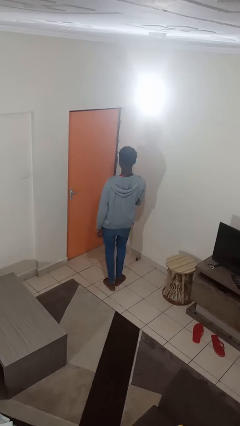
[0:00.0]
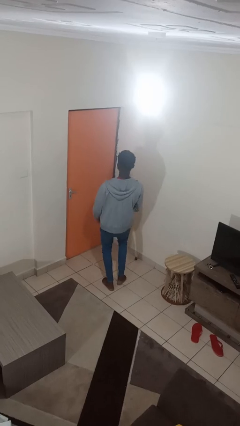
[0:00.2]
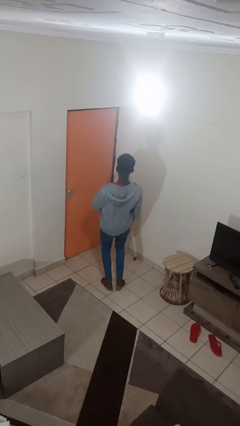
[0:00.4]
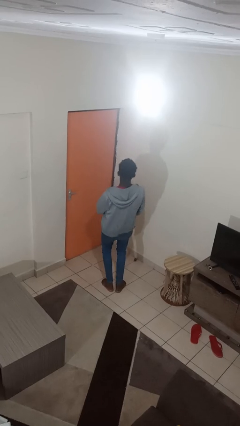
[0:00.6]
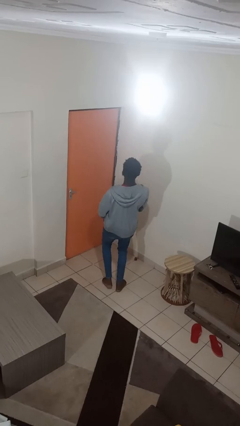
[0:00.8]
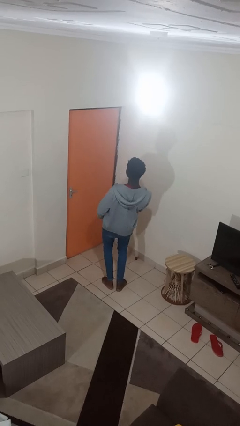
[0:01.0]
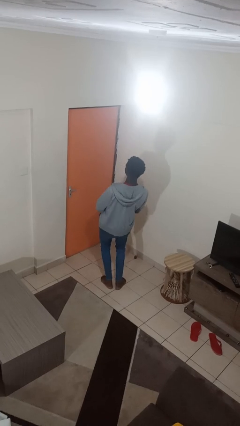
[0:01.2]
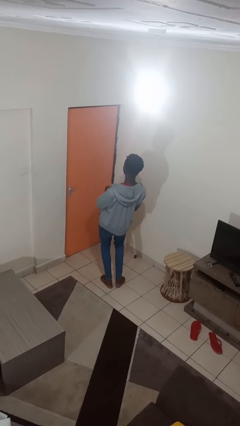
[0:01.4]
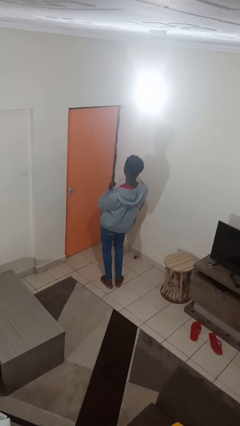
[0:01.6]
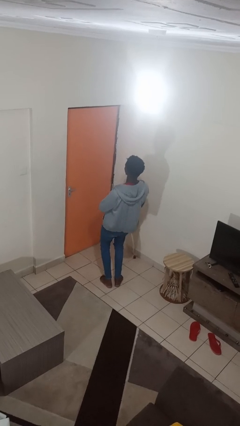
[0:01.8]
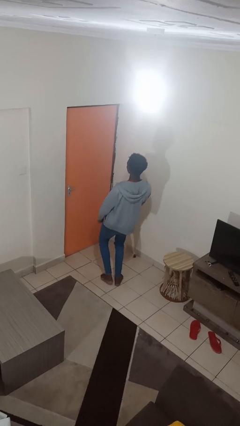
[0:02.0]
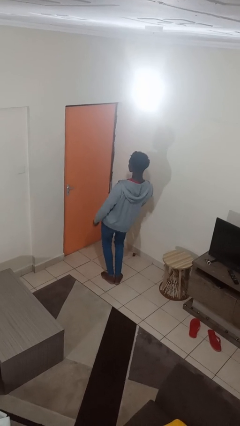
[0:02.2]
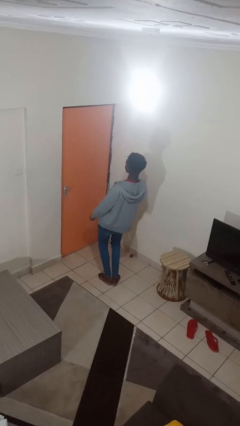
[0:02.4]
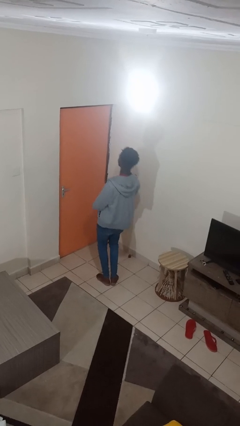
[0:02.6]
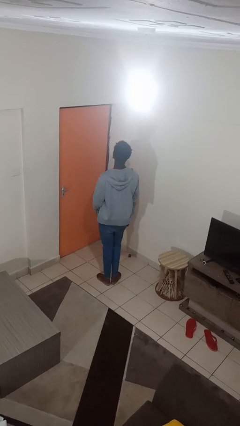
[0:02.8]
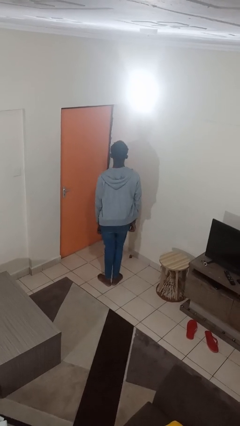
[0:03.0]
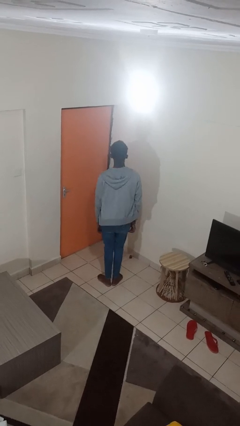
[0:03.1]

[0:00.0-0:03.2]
person dances in place

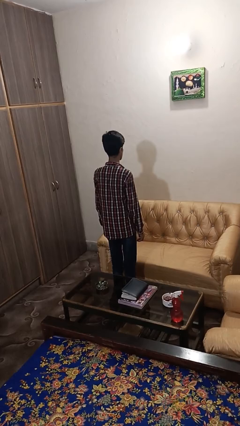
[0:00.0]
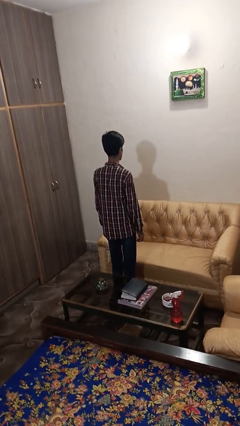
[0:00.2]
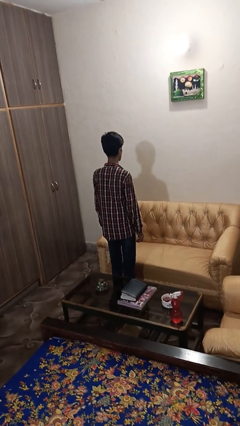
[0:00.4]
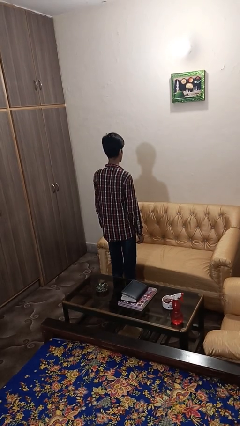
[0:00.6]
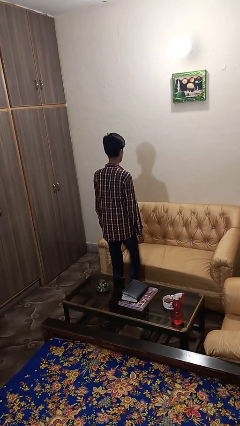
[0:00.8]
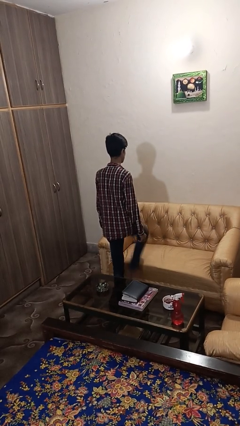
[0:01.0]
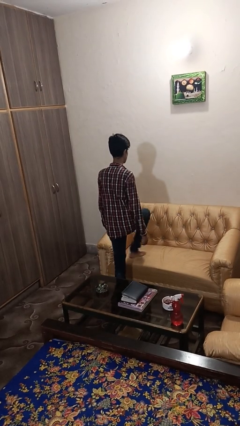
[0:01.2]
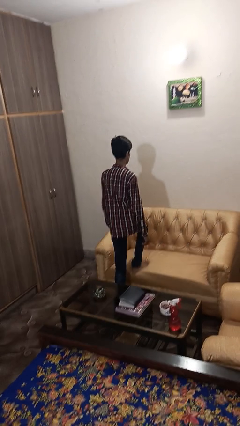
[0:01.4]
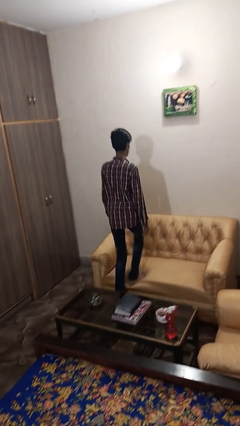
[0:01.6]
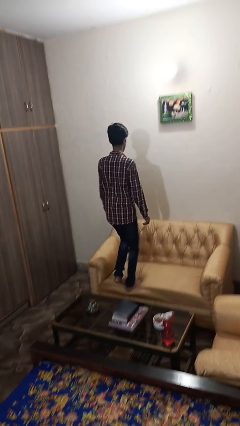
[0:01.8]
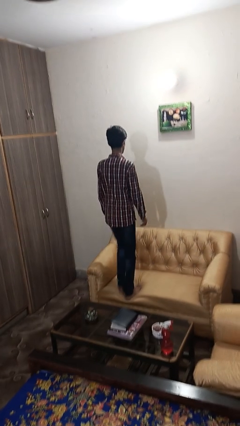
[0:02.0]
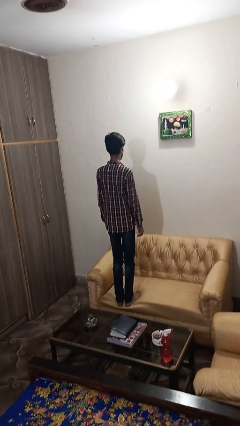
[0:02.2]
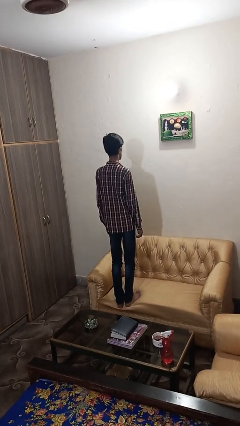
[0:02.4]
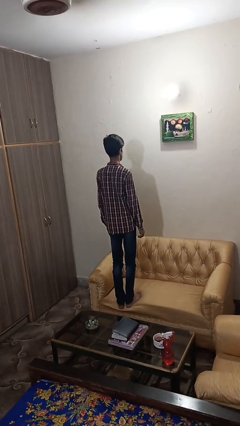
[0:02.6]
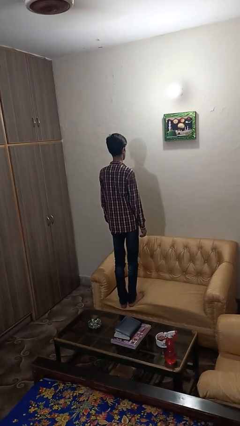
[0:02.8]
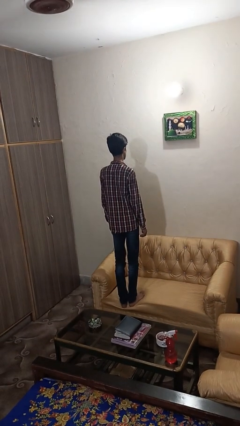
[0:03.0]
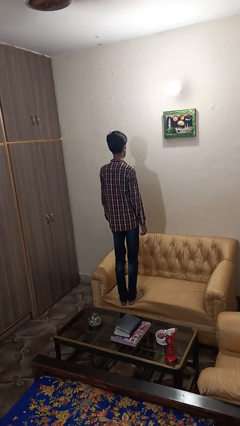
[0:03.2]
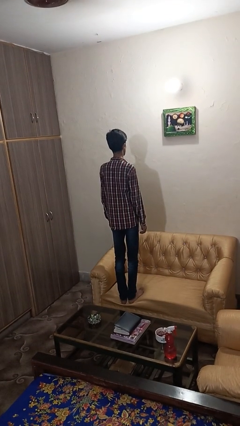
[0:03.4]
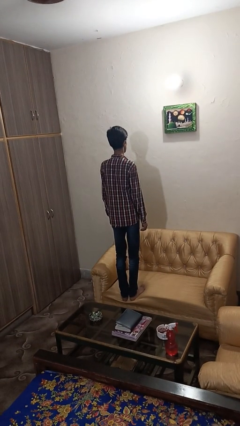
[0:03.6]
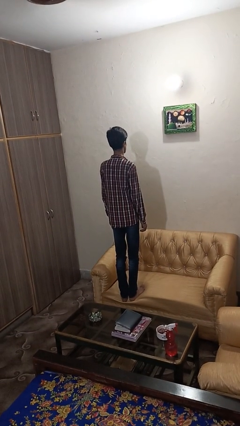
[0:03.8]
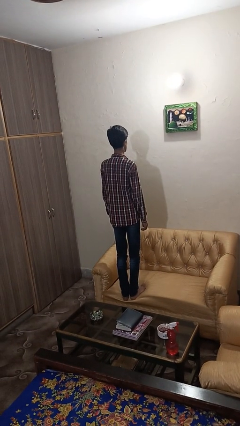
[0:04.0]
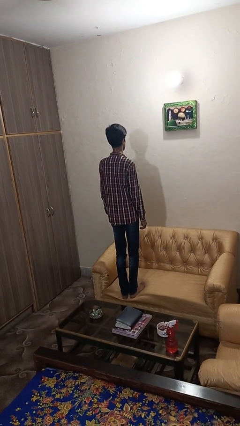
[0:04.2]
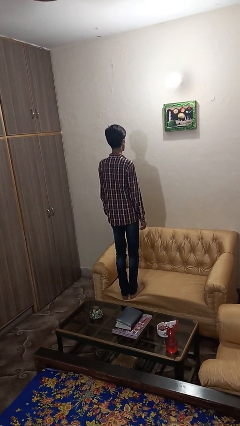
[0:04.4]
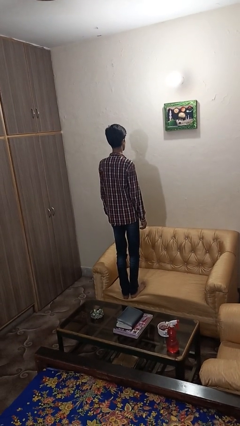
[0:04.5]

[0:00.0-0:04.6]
person climbs on couch

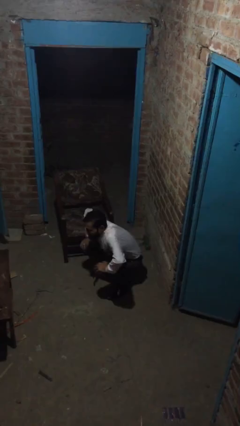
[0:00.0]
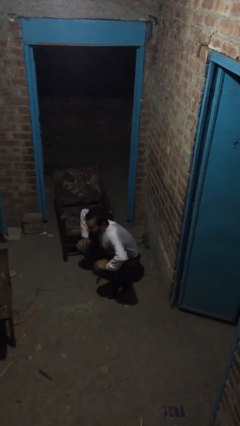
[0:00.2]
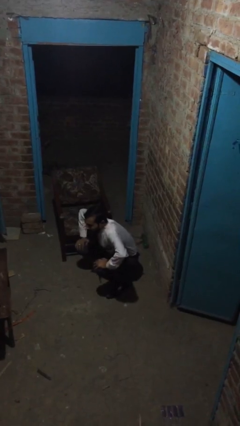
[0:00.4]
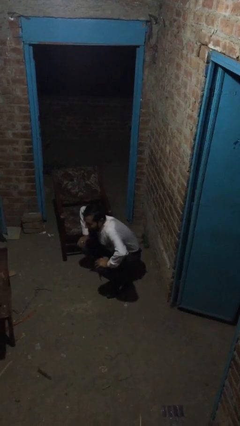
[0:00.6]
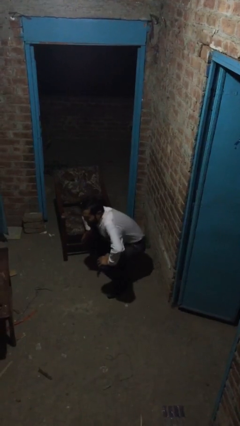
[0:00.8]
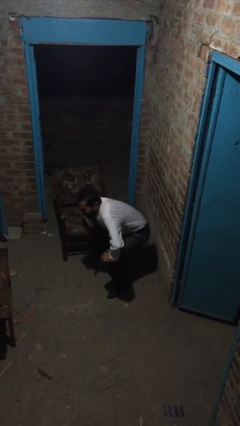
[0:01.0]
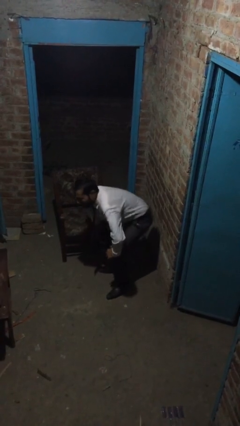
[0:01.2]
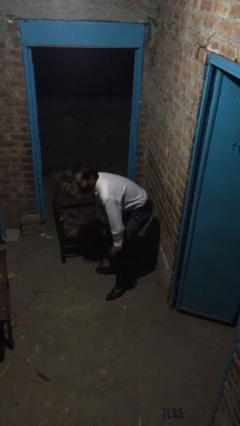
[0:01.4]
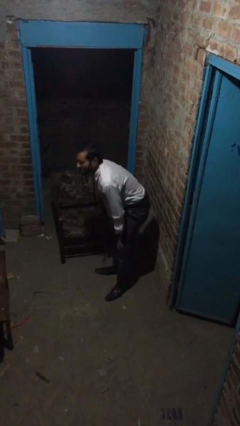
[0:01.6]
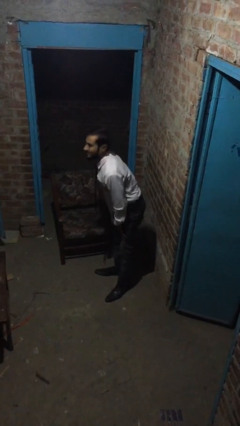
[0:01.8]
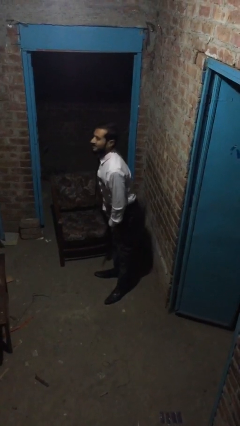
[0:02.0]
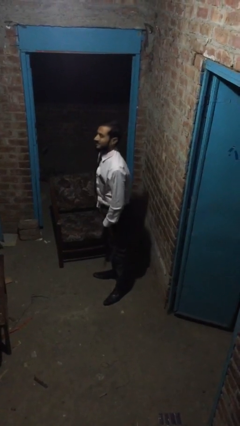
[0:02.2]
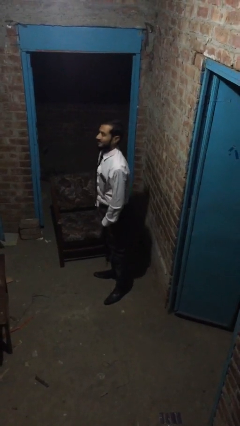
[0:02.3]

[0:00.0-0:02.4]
person stands up

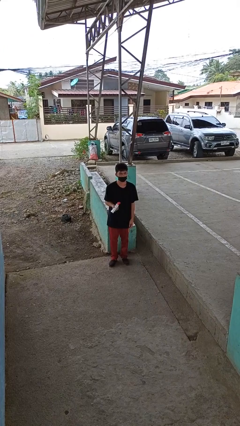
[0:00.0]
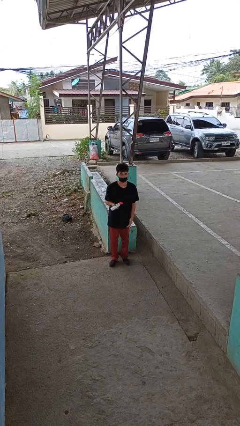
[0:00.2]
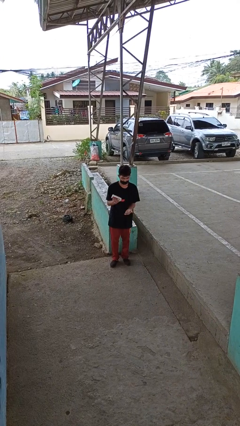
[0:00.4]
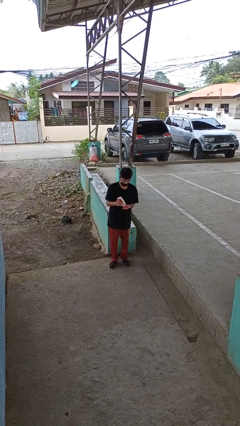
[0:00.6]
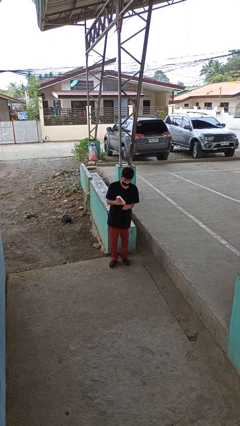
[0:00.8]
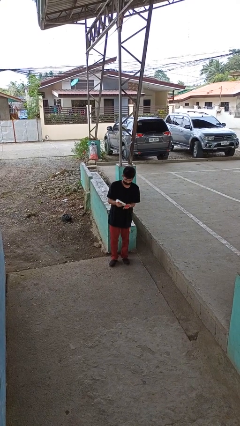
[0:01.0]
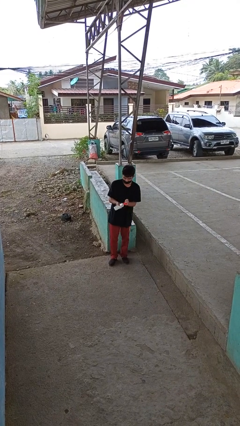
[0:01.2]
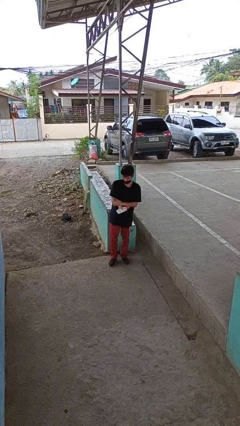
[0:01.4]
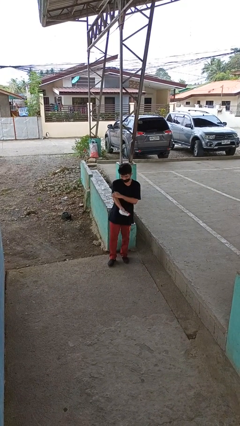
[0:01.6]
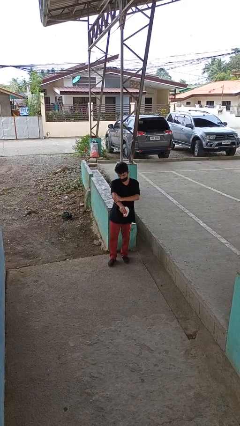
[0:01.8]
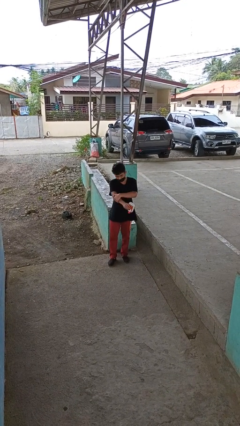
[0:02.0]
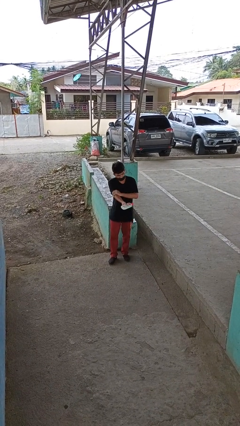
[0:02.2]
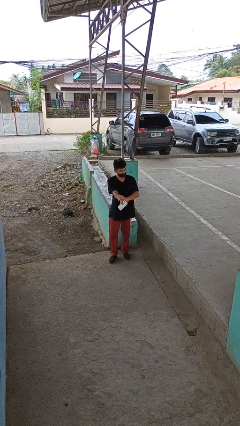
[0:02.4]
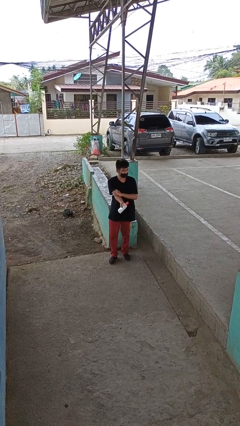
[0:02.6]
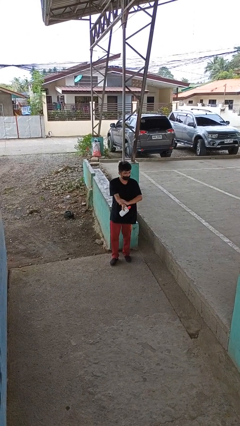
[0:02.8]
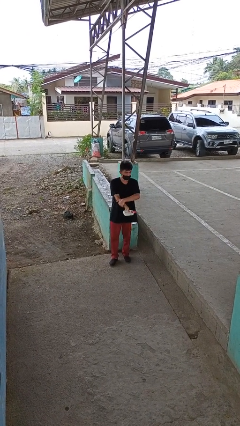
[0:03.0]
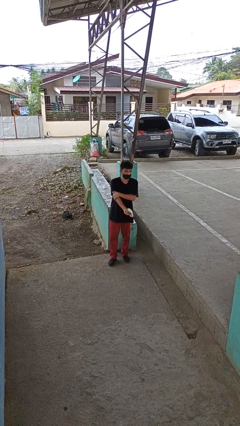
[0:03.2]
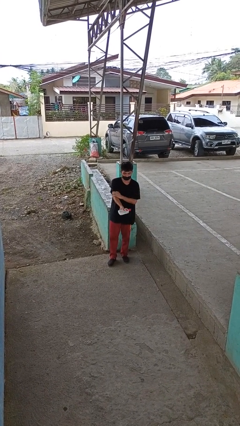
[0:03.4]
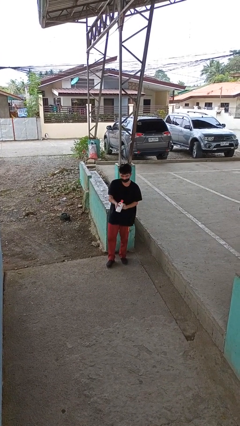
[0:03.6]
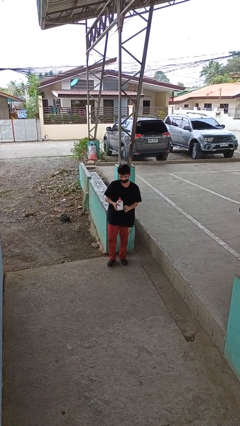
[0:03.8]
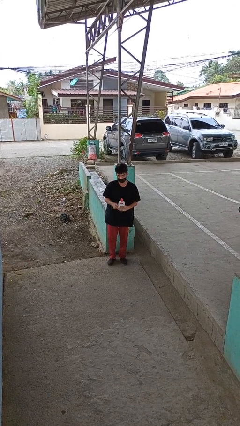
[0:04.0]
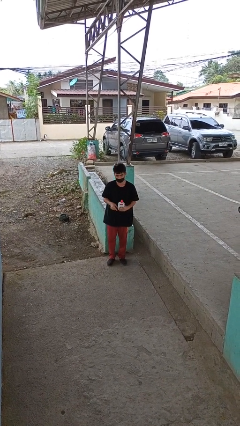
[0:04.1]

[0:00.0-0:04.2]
person applies sunscreen

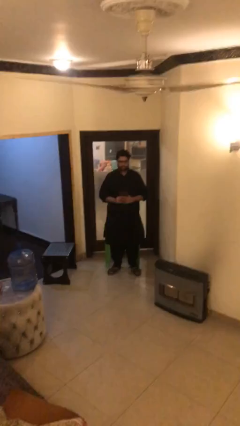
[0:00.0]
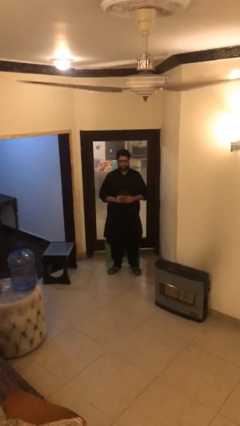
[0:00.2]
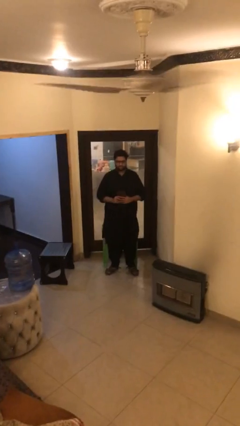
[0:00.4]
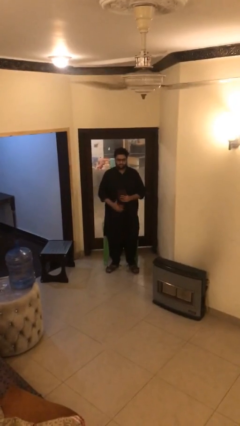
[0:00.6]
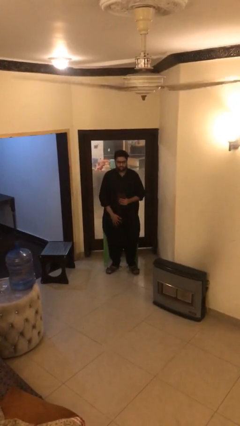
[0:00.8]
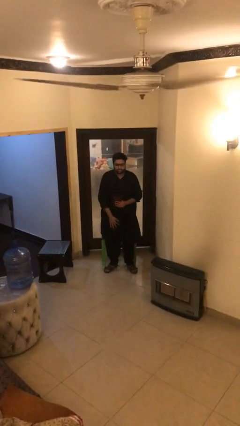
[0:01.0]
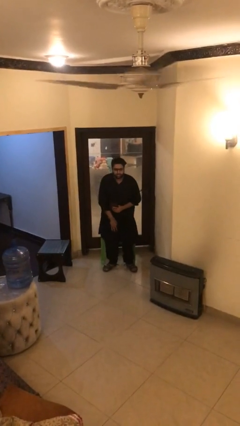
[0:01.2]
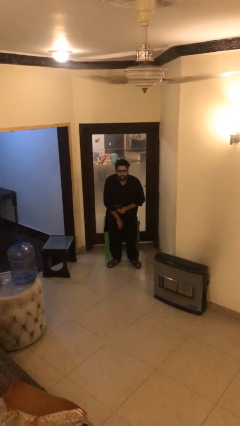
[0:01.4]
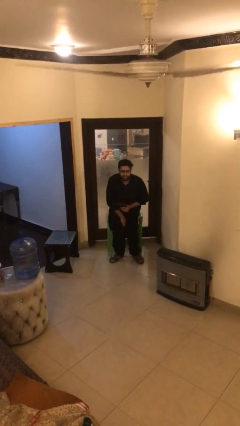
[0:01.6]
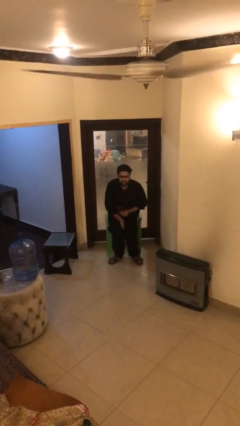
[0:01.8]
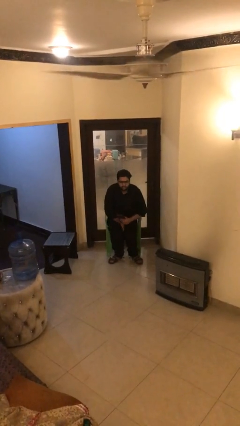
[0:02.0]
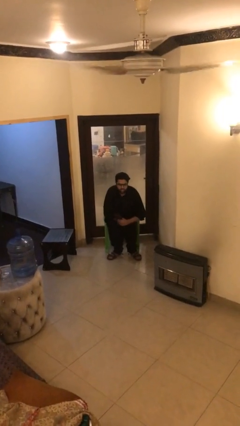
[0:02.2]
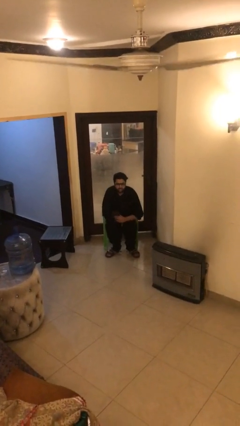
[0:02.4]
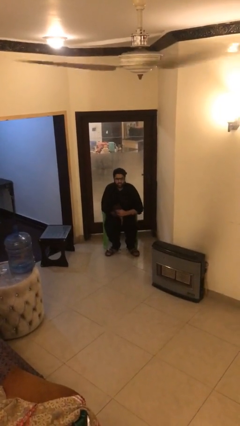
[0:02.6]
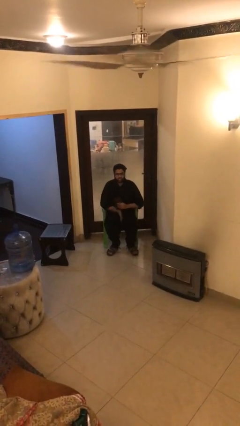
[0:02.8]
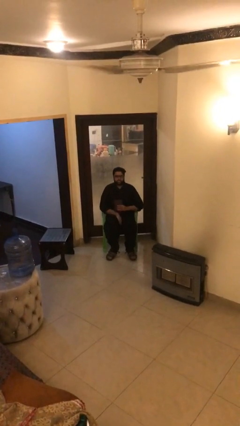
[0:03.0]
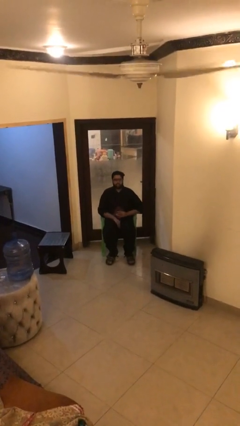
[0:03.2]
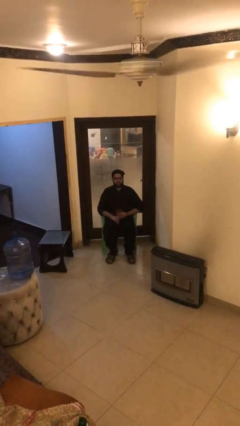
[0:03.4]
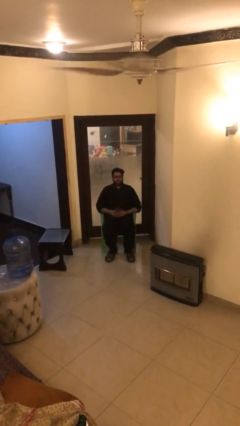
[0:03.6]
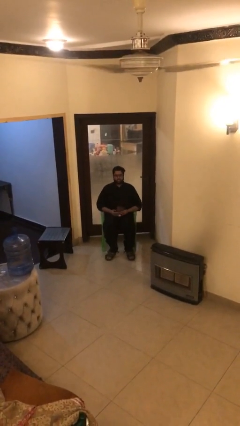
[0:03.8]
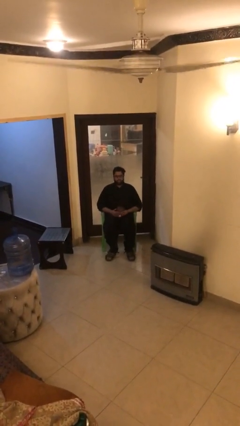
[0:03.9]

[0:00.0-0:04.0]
person sits down
